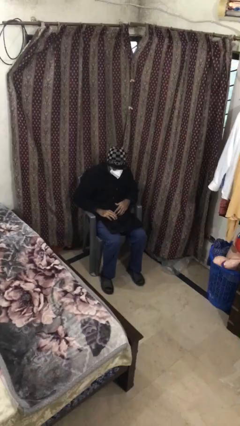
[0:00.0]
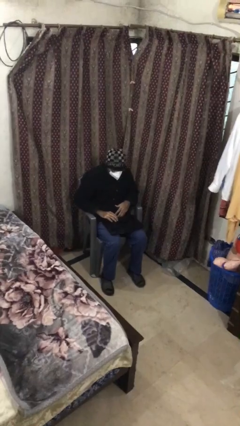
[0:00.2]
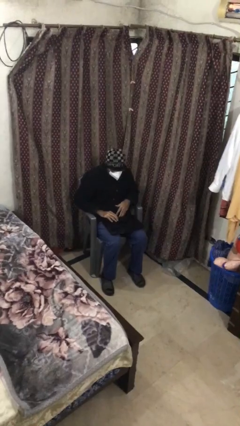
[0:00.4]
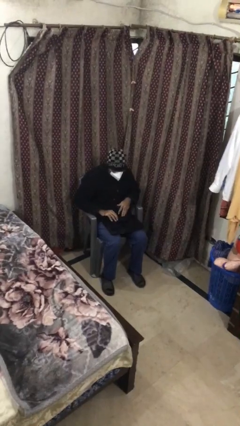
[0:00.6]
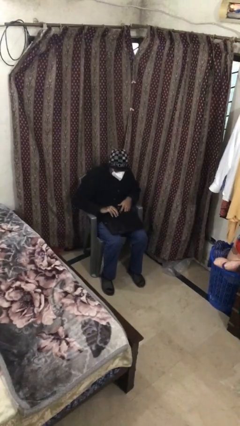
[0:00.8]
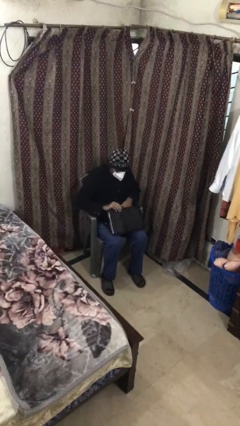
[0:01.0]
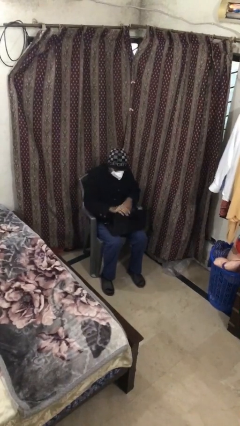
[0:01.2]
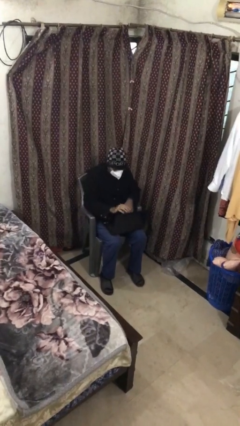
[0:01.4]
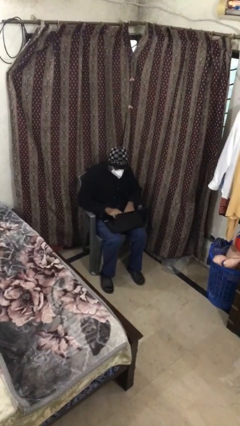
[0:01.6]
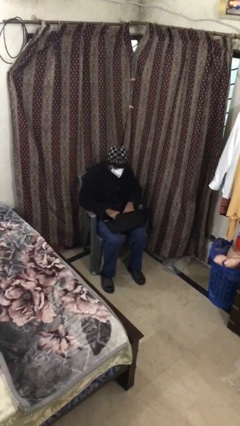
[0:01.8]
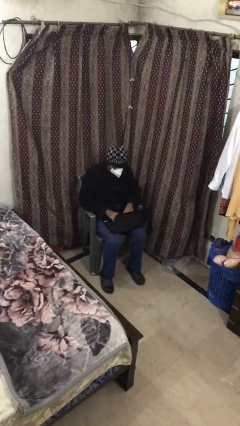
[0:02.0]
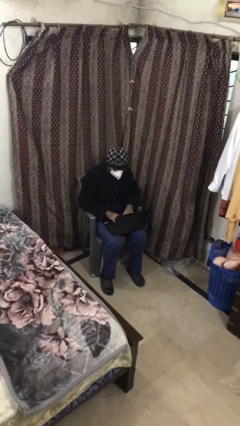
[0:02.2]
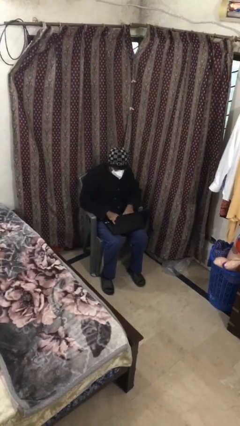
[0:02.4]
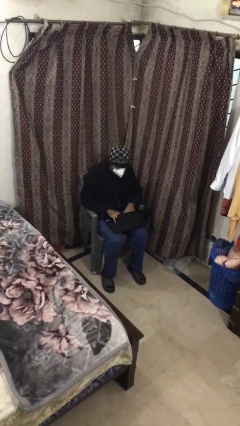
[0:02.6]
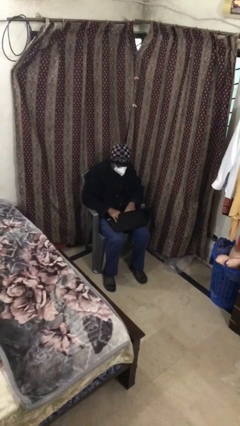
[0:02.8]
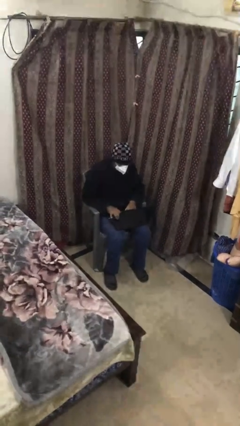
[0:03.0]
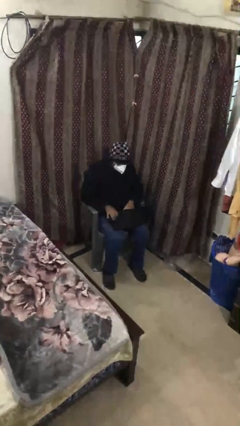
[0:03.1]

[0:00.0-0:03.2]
person interacts with laptop

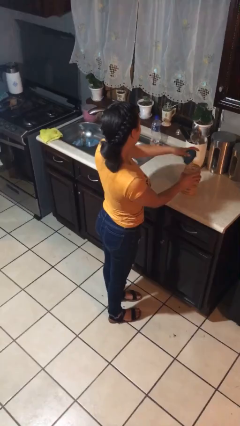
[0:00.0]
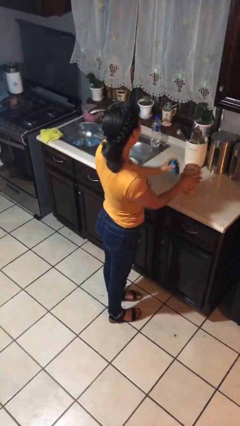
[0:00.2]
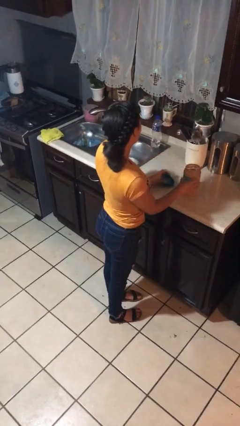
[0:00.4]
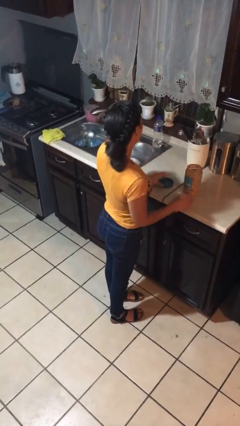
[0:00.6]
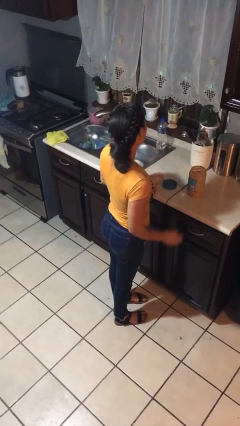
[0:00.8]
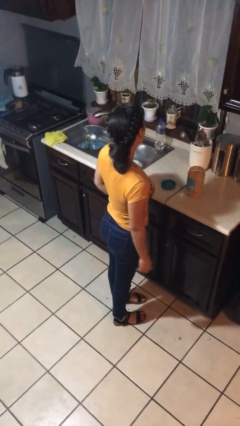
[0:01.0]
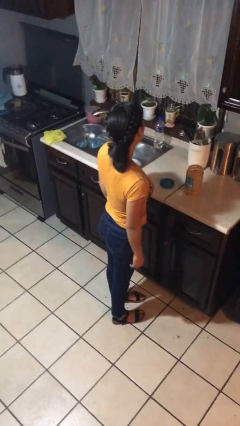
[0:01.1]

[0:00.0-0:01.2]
person opens jar

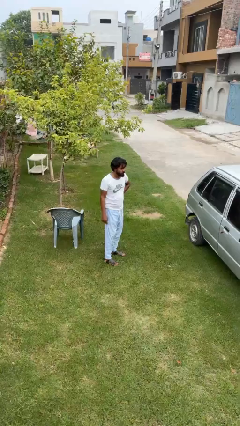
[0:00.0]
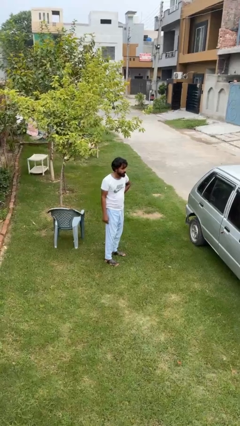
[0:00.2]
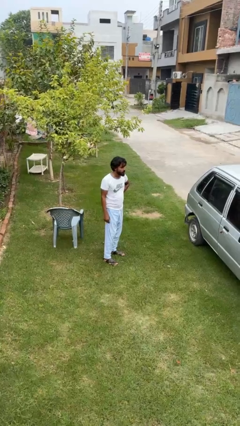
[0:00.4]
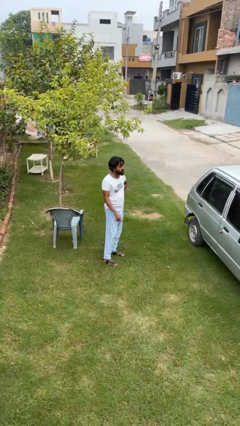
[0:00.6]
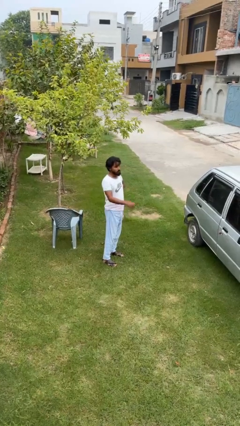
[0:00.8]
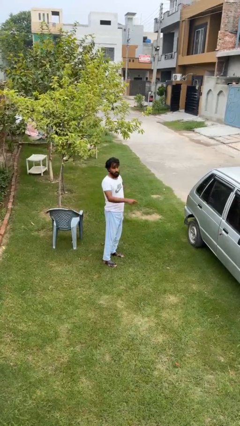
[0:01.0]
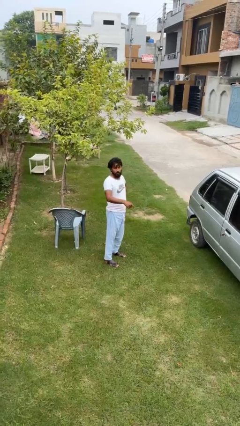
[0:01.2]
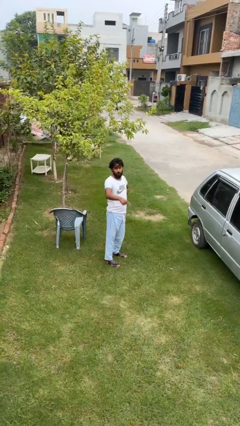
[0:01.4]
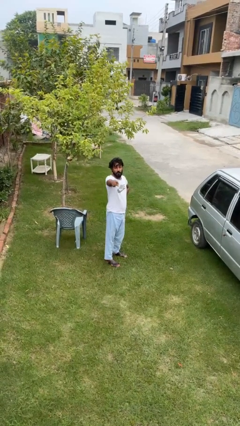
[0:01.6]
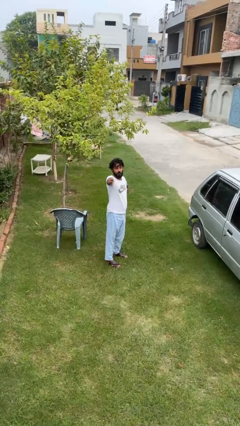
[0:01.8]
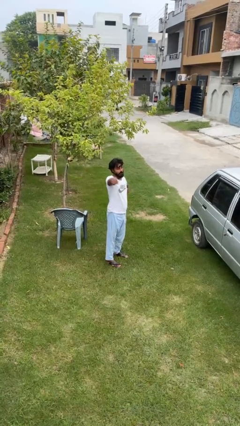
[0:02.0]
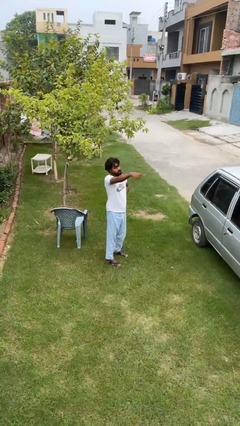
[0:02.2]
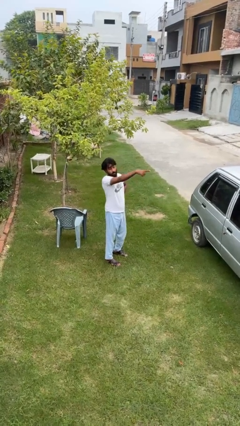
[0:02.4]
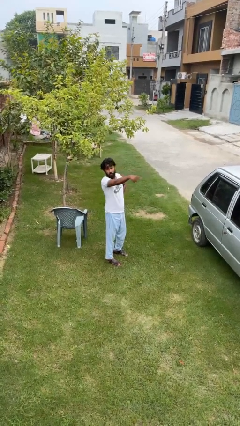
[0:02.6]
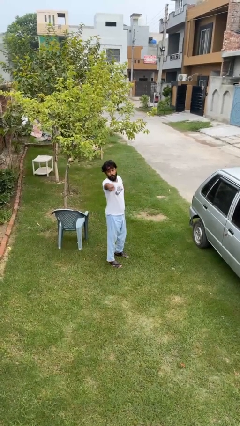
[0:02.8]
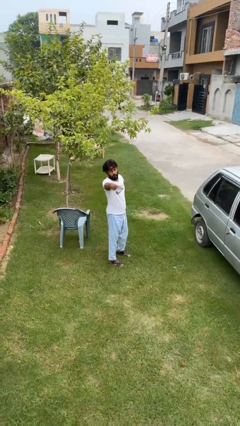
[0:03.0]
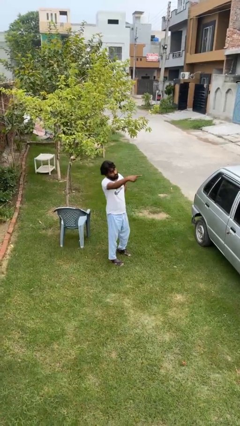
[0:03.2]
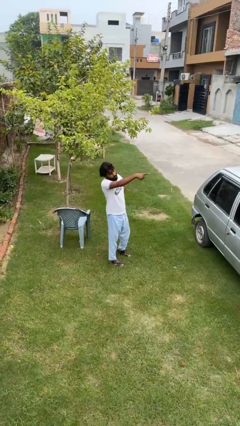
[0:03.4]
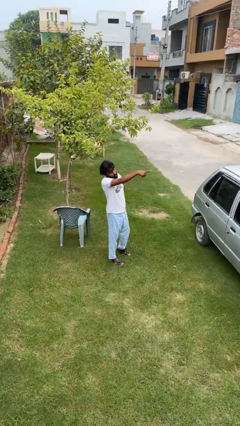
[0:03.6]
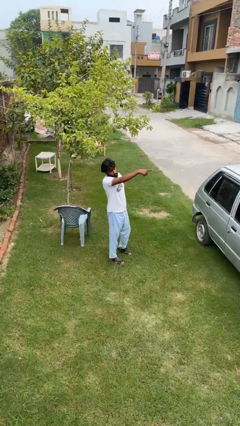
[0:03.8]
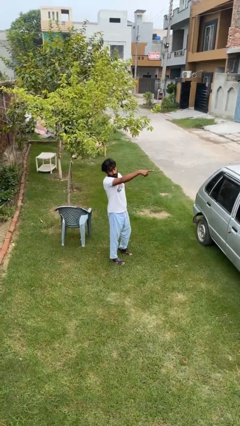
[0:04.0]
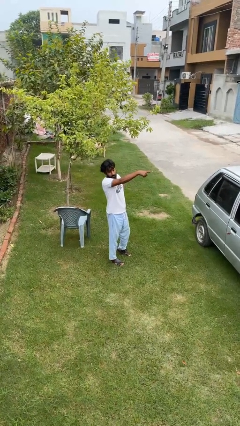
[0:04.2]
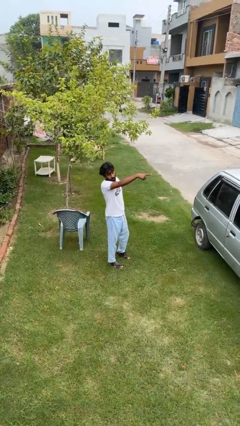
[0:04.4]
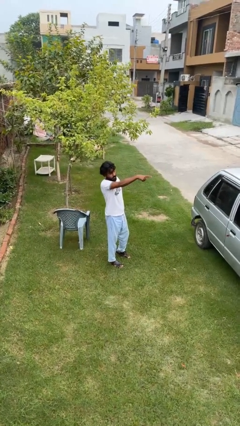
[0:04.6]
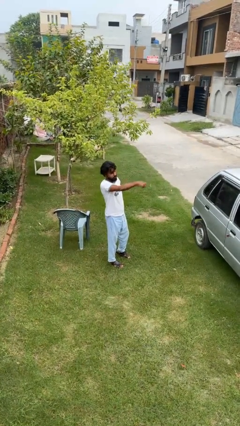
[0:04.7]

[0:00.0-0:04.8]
person points at person

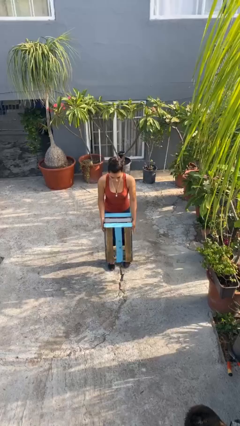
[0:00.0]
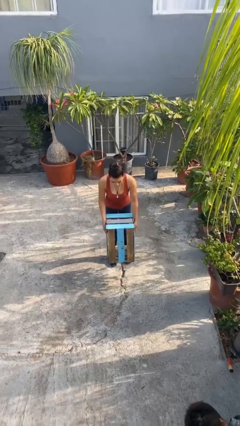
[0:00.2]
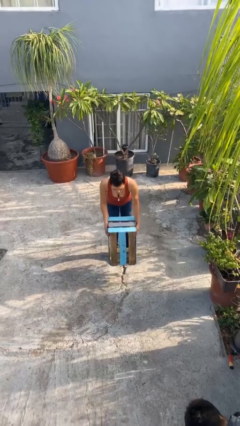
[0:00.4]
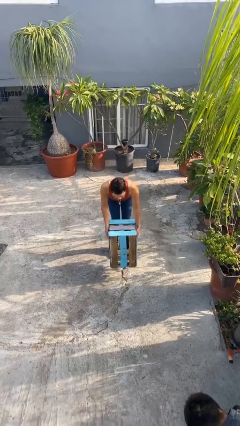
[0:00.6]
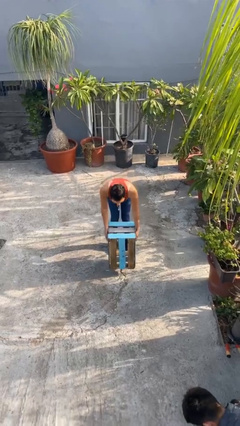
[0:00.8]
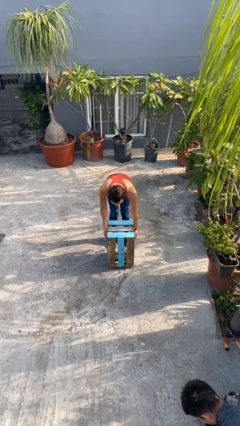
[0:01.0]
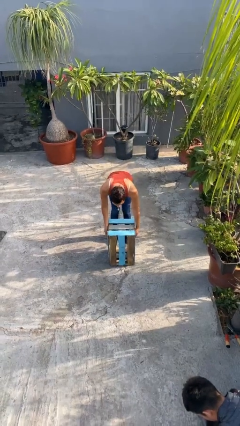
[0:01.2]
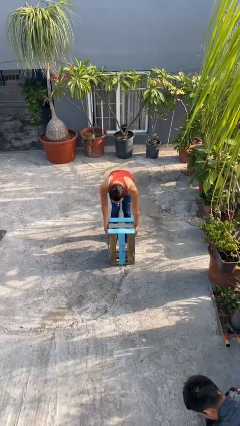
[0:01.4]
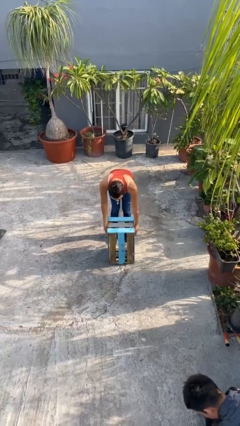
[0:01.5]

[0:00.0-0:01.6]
person puts down object on floor

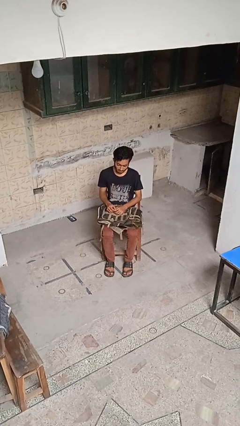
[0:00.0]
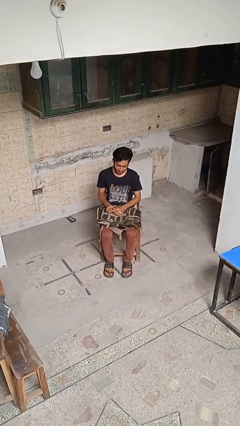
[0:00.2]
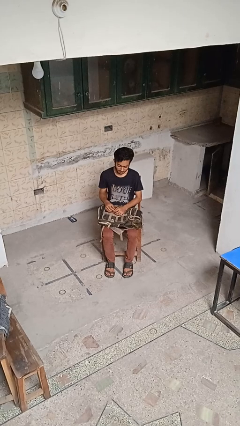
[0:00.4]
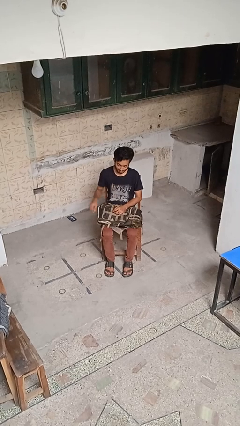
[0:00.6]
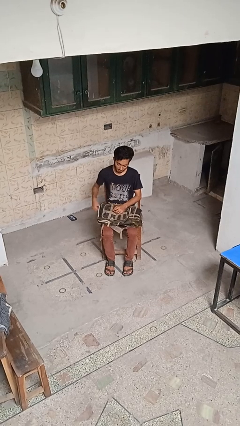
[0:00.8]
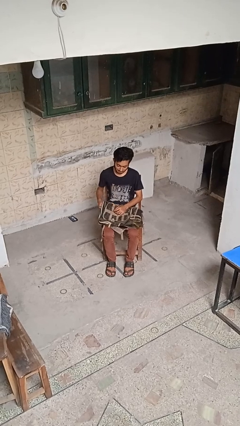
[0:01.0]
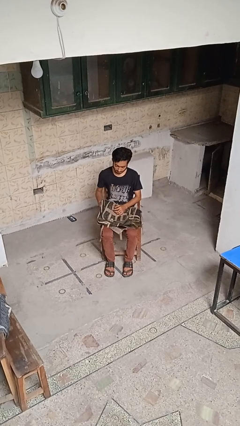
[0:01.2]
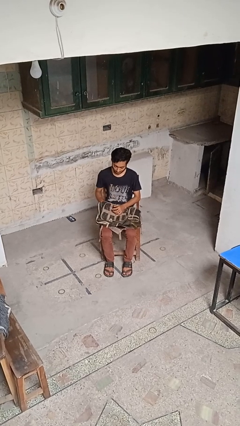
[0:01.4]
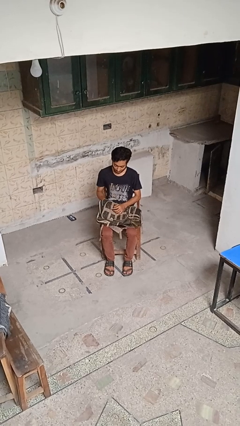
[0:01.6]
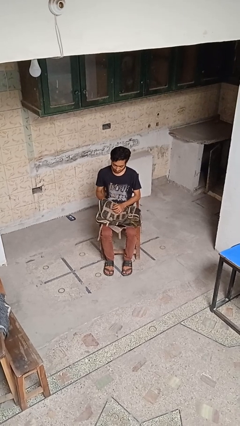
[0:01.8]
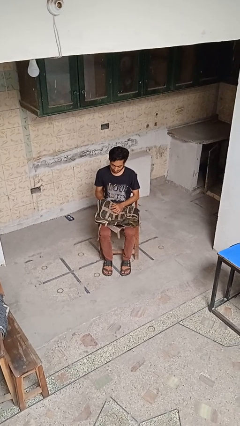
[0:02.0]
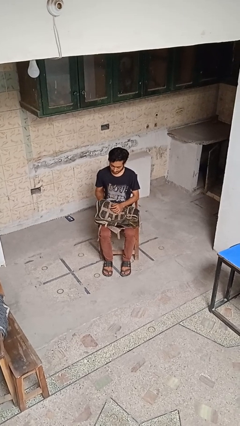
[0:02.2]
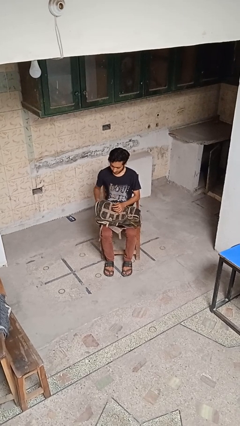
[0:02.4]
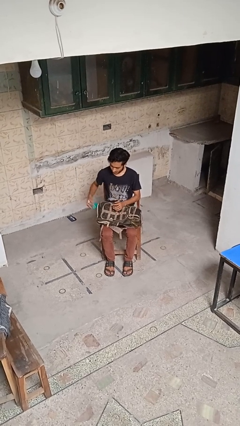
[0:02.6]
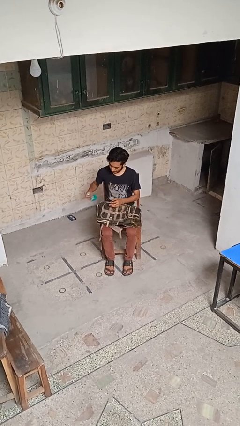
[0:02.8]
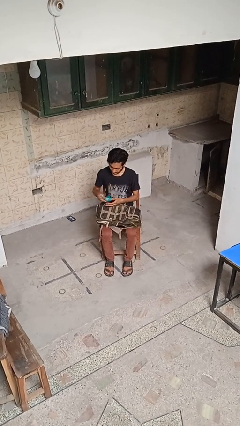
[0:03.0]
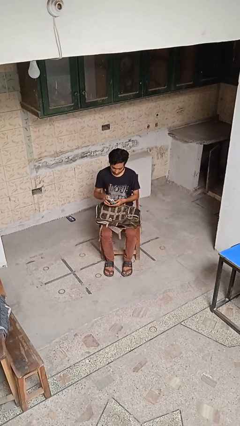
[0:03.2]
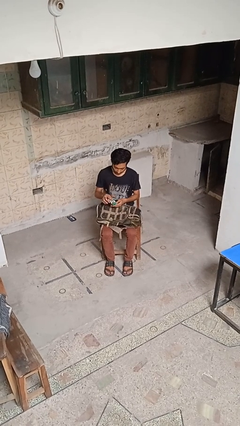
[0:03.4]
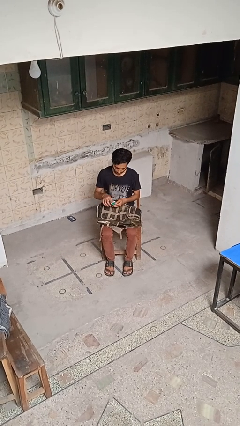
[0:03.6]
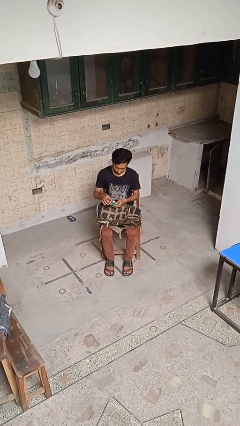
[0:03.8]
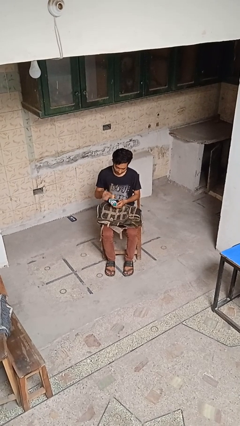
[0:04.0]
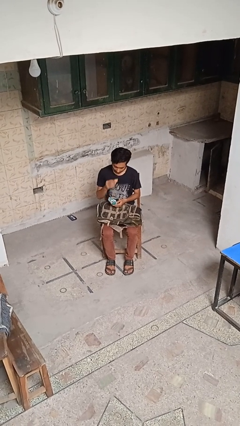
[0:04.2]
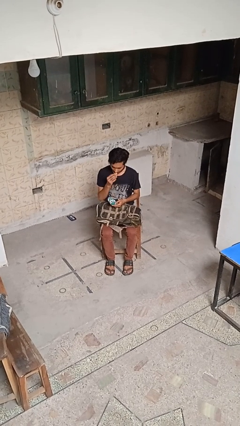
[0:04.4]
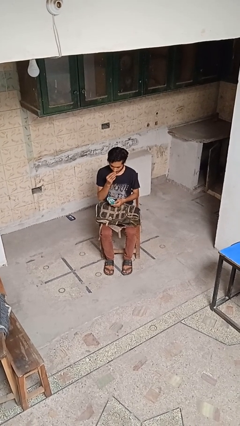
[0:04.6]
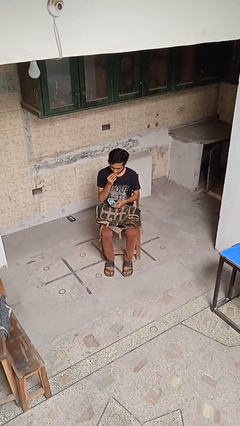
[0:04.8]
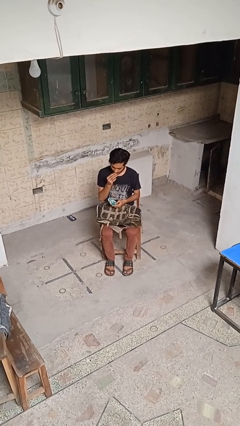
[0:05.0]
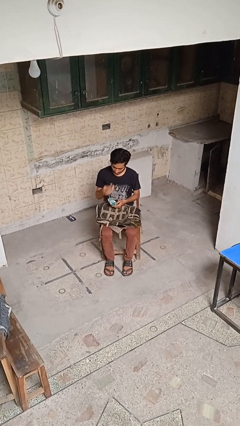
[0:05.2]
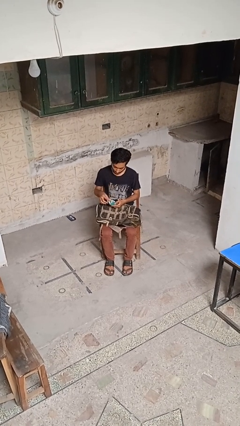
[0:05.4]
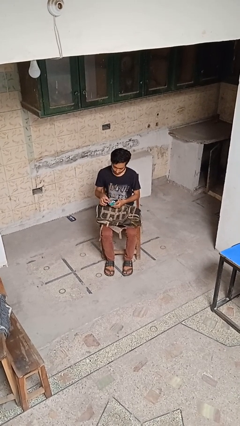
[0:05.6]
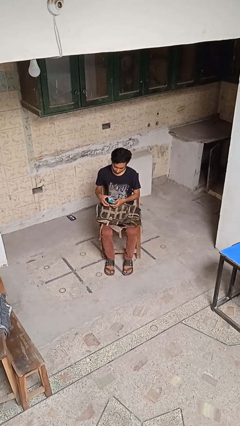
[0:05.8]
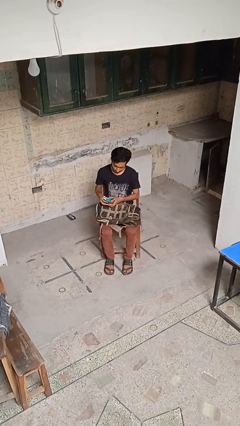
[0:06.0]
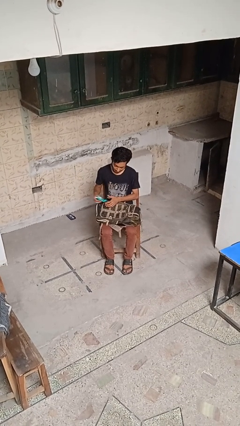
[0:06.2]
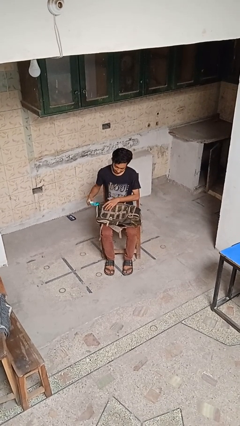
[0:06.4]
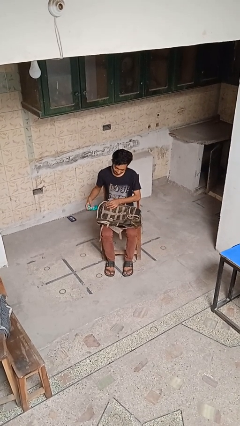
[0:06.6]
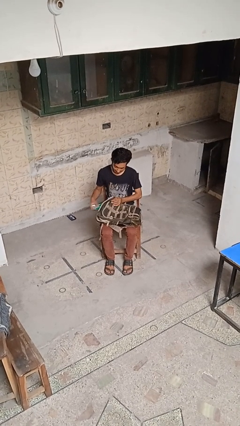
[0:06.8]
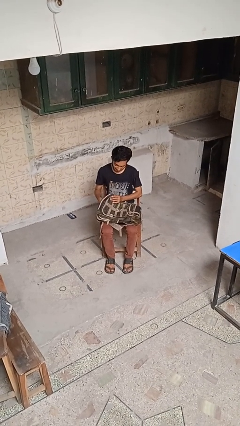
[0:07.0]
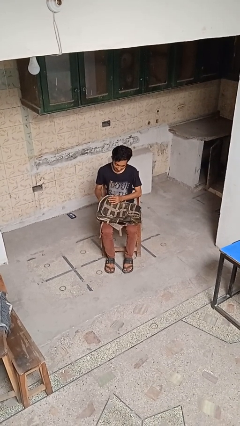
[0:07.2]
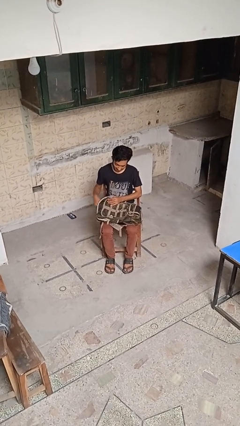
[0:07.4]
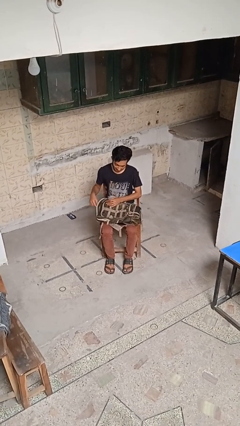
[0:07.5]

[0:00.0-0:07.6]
person eats snack from bag
